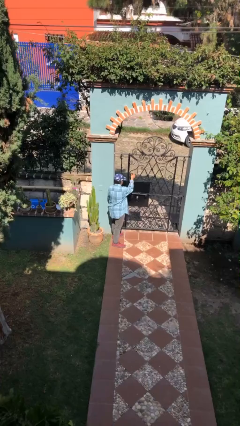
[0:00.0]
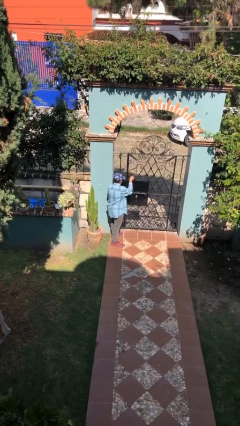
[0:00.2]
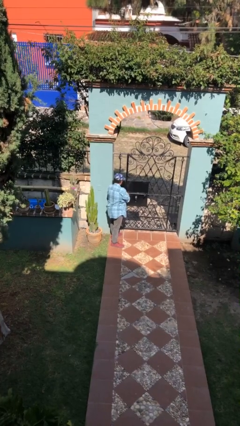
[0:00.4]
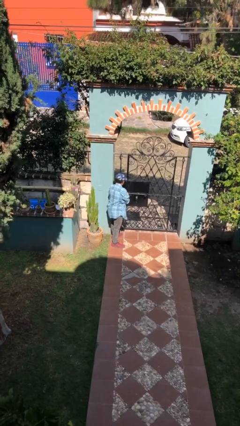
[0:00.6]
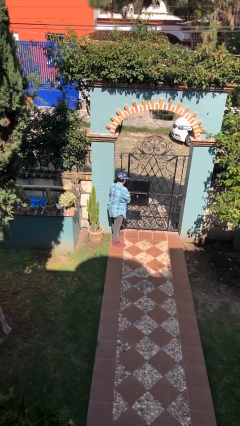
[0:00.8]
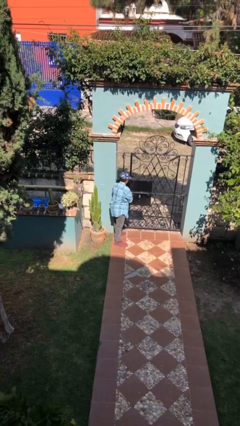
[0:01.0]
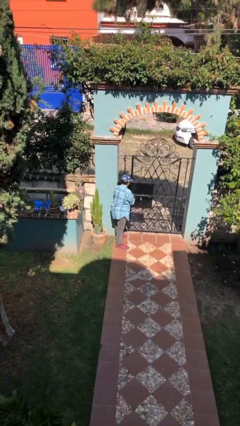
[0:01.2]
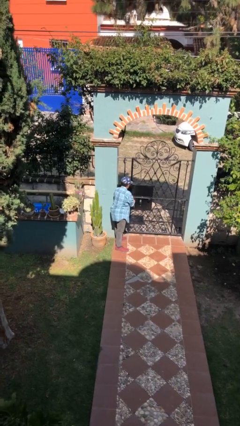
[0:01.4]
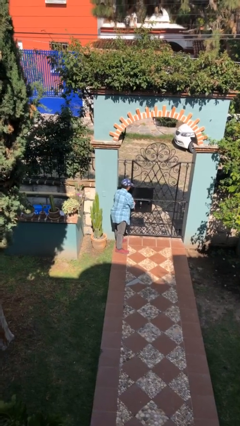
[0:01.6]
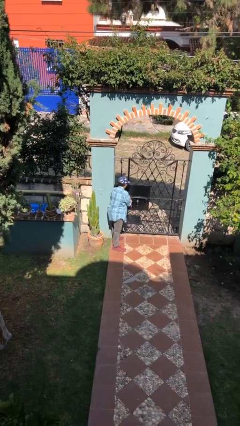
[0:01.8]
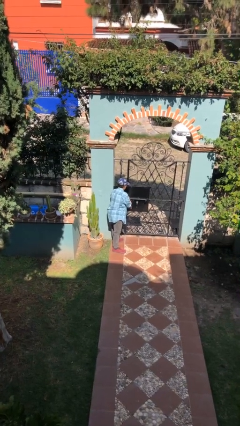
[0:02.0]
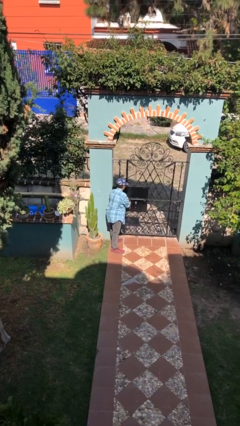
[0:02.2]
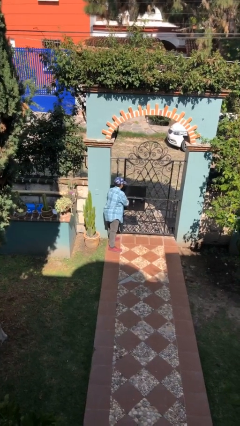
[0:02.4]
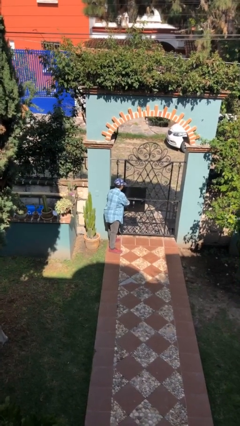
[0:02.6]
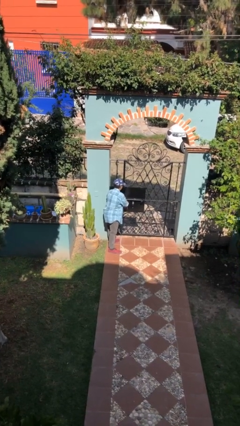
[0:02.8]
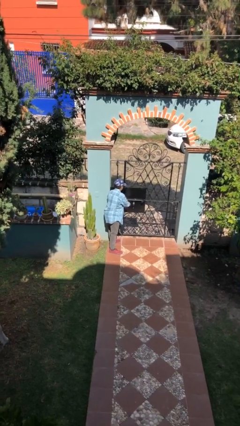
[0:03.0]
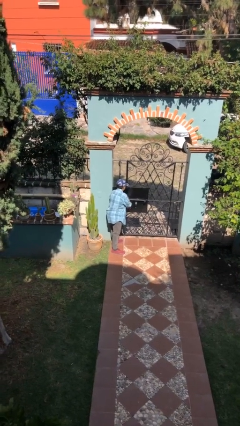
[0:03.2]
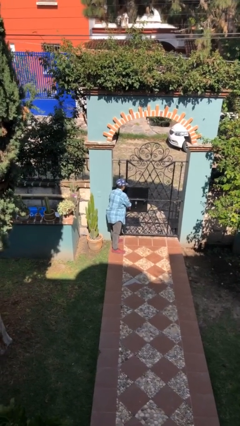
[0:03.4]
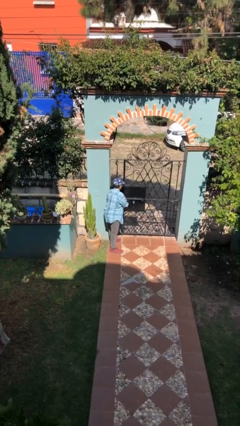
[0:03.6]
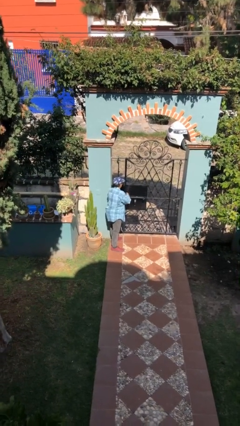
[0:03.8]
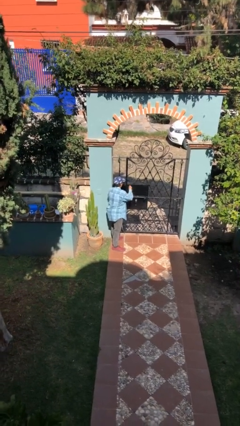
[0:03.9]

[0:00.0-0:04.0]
person locks door with keys

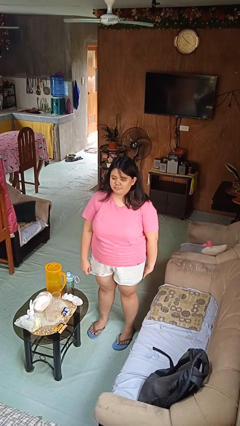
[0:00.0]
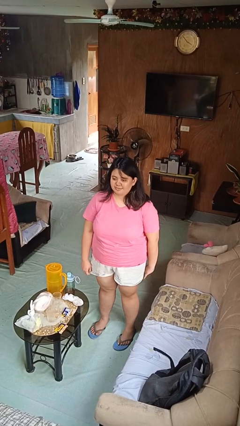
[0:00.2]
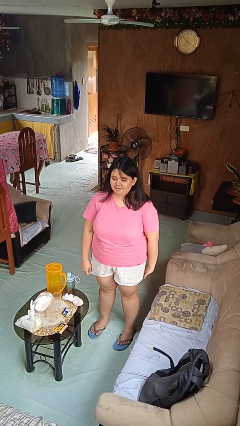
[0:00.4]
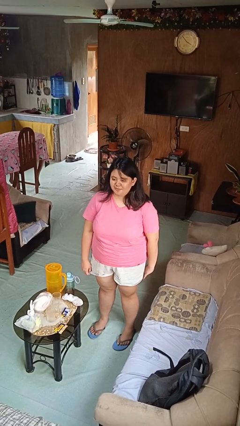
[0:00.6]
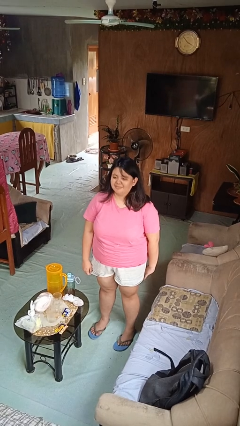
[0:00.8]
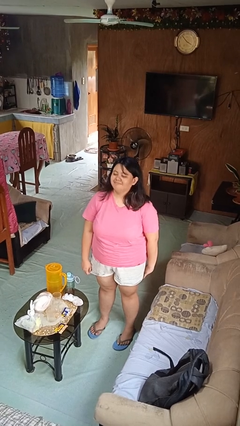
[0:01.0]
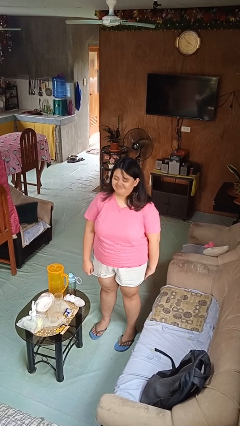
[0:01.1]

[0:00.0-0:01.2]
person nods head

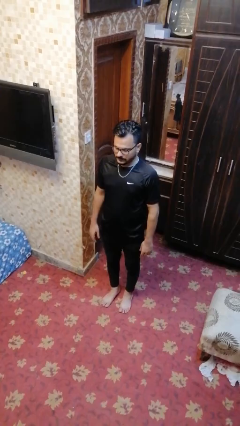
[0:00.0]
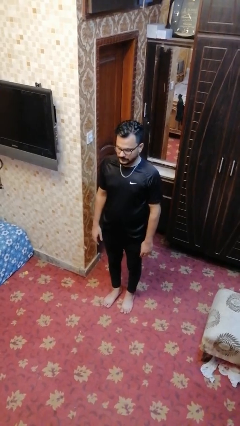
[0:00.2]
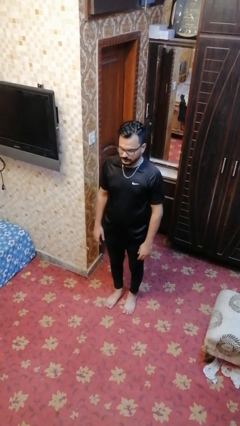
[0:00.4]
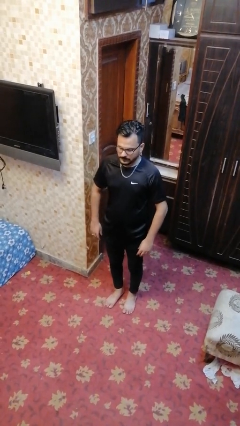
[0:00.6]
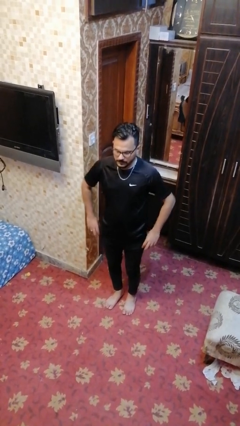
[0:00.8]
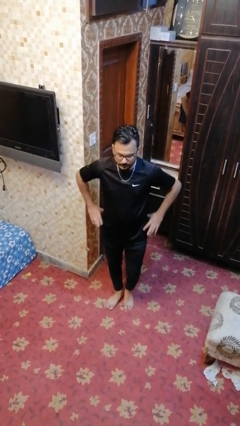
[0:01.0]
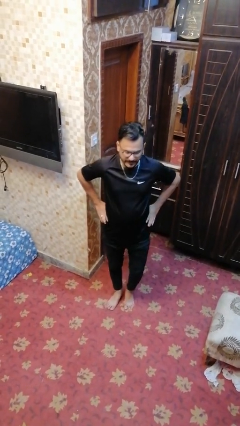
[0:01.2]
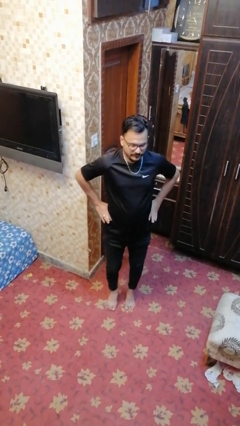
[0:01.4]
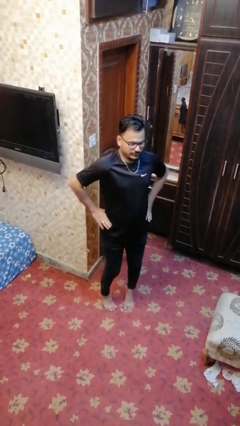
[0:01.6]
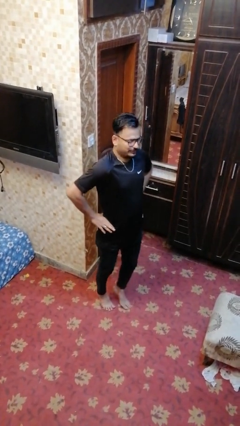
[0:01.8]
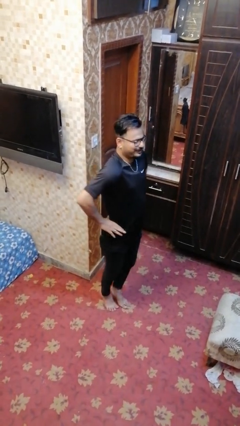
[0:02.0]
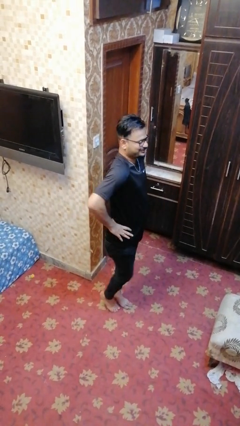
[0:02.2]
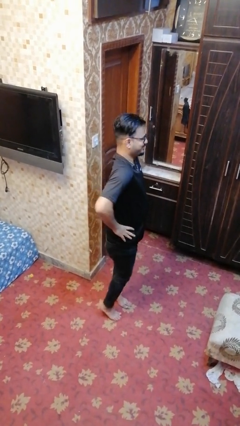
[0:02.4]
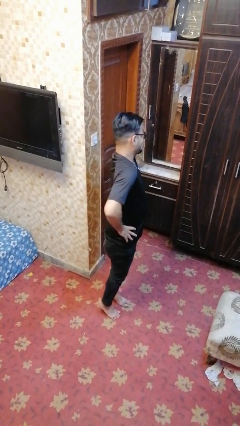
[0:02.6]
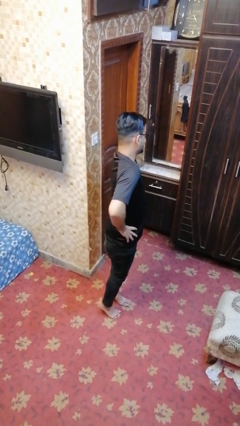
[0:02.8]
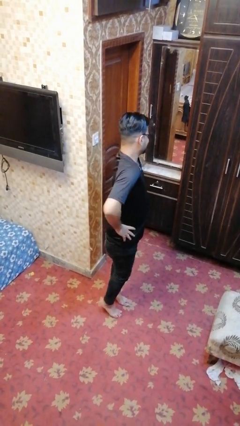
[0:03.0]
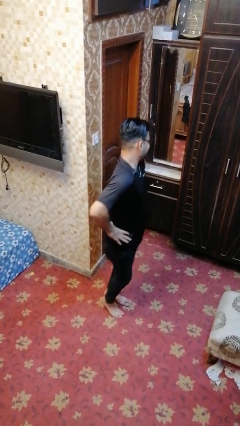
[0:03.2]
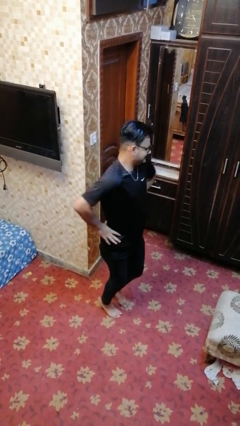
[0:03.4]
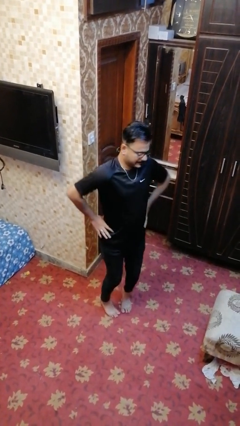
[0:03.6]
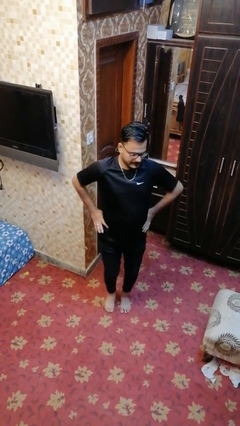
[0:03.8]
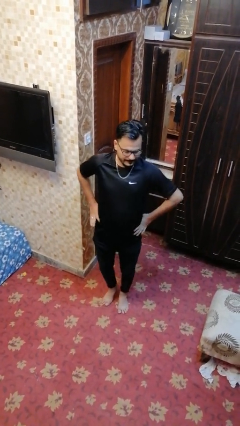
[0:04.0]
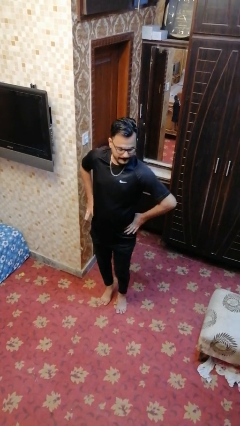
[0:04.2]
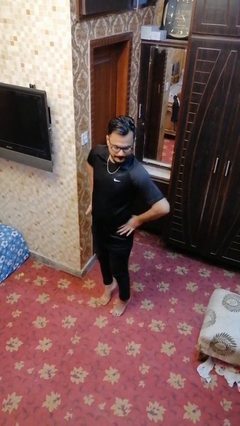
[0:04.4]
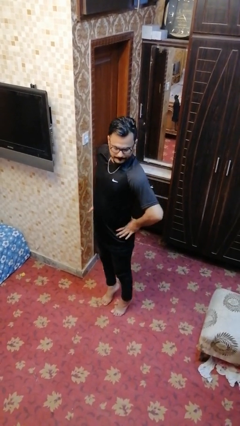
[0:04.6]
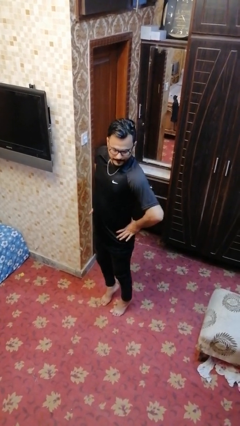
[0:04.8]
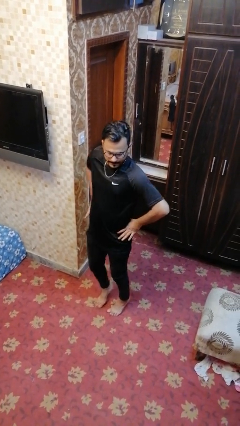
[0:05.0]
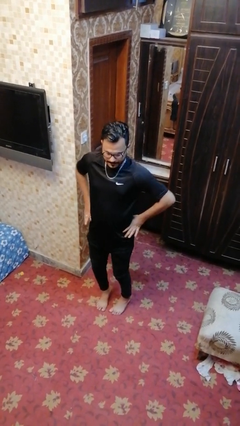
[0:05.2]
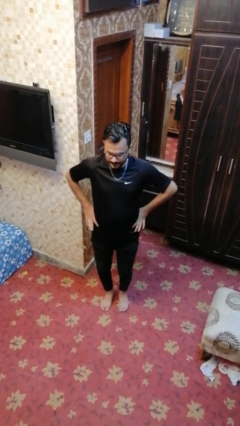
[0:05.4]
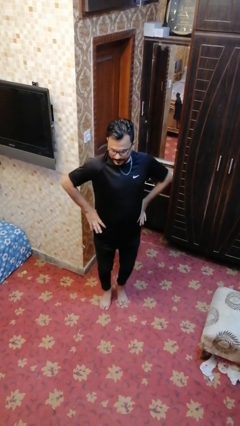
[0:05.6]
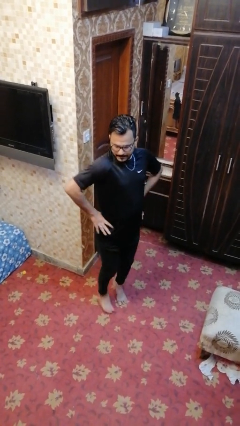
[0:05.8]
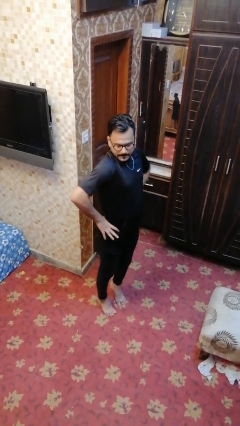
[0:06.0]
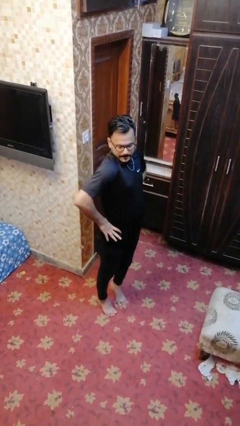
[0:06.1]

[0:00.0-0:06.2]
person walks tiptoe

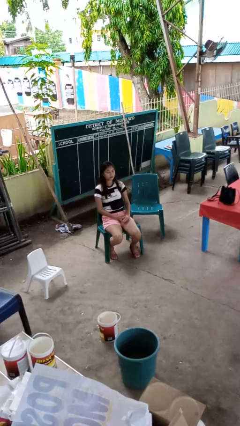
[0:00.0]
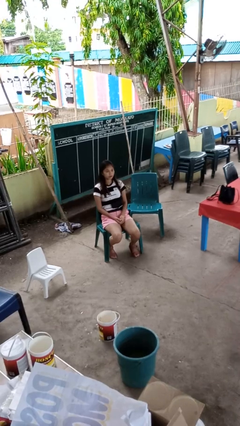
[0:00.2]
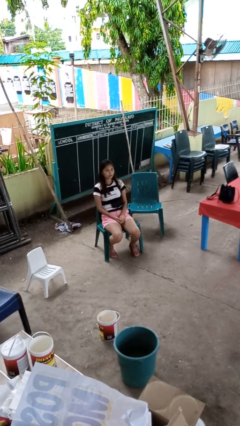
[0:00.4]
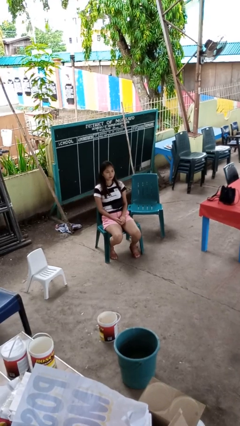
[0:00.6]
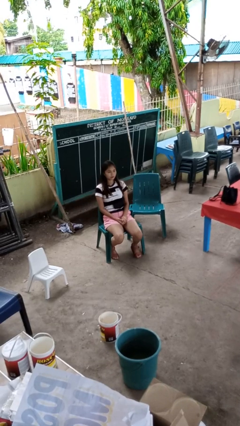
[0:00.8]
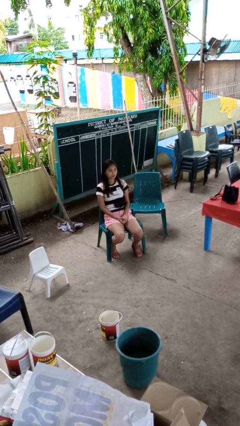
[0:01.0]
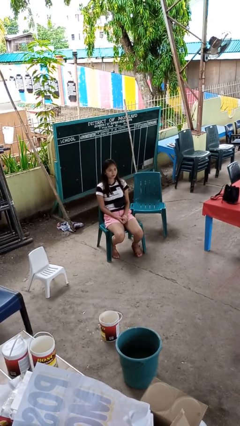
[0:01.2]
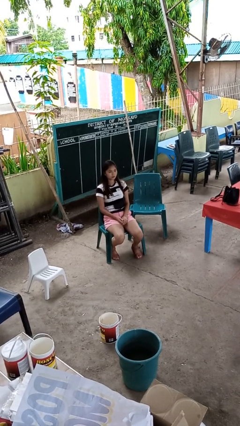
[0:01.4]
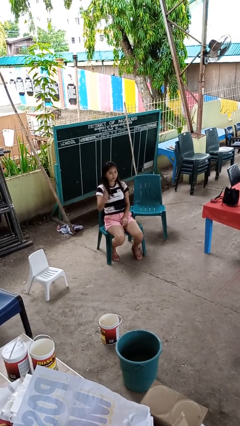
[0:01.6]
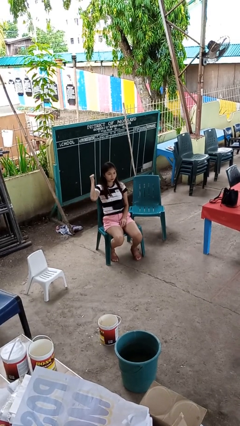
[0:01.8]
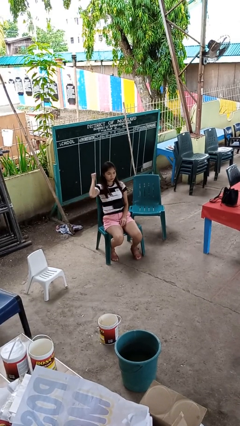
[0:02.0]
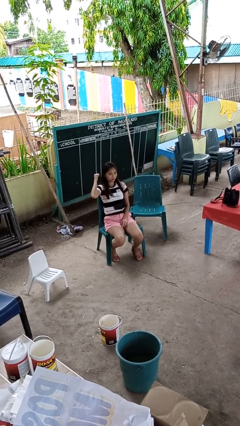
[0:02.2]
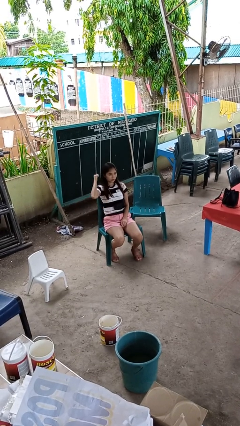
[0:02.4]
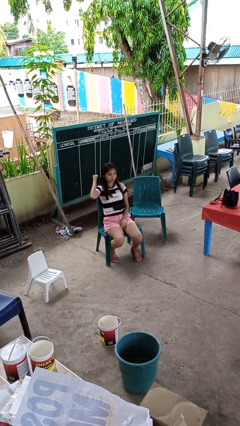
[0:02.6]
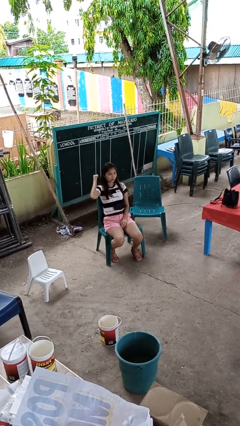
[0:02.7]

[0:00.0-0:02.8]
person gestures behind me

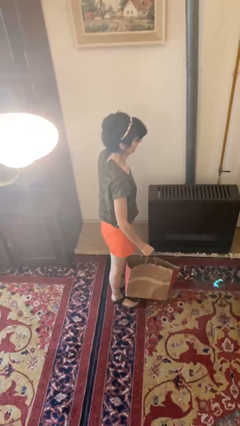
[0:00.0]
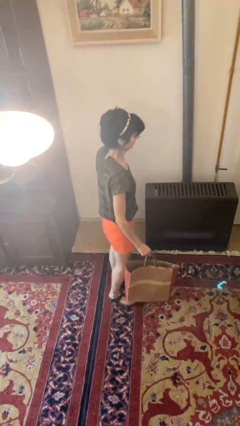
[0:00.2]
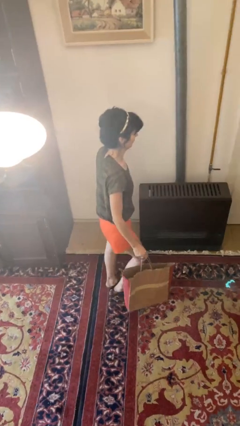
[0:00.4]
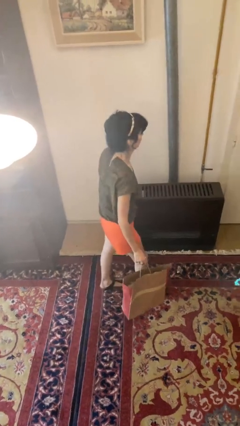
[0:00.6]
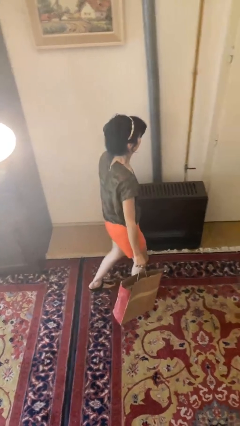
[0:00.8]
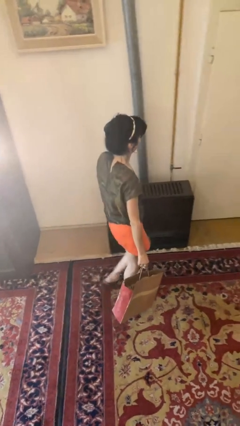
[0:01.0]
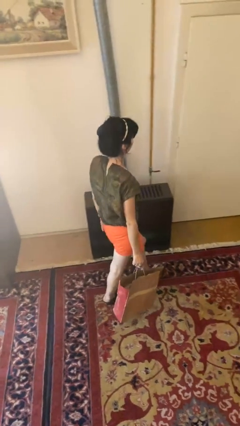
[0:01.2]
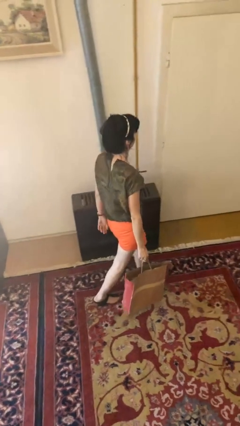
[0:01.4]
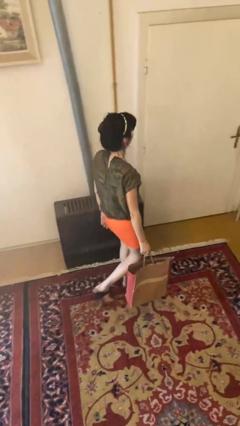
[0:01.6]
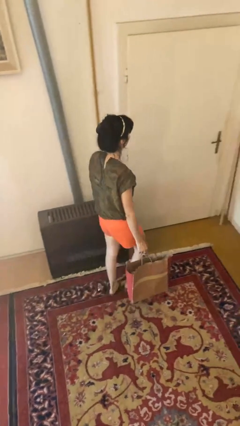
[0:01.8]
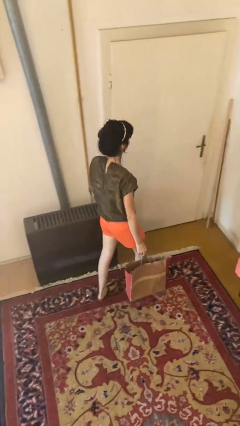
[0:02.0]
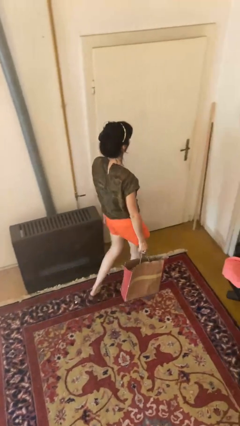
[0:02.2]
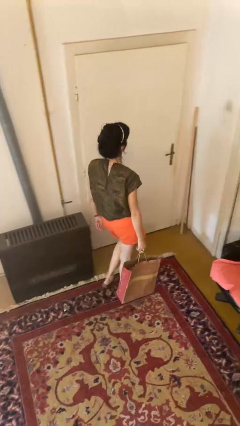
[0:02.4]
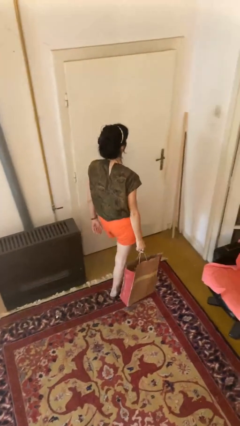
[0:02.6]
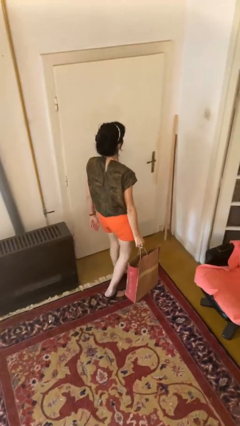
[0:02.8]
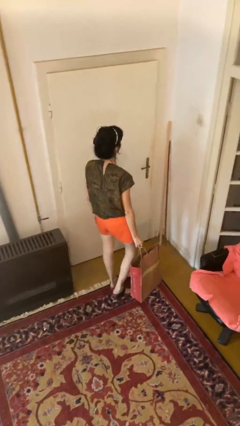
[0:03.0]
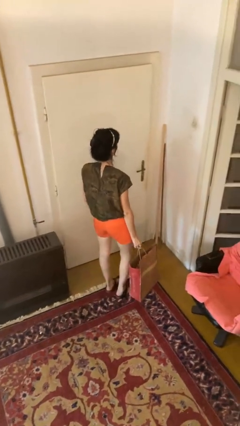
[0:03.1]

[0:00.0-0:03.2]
person carries groceries

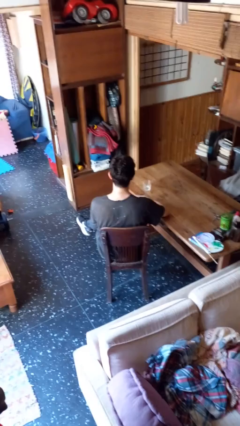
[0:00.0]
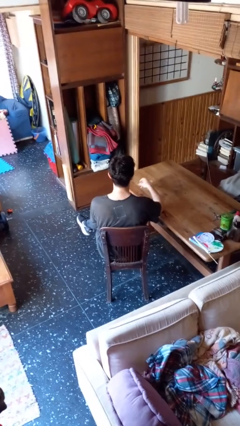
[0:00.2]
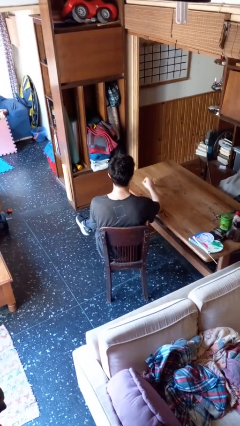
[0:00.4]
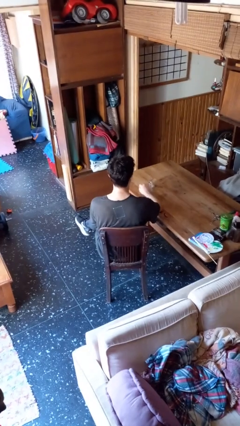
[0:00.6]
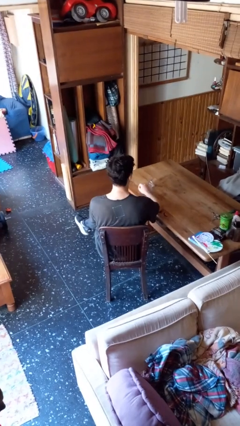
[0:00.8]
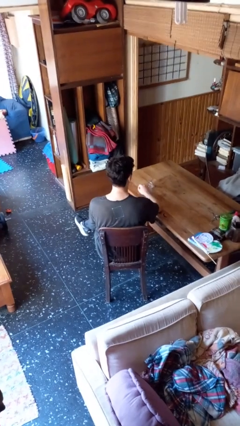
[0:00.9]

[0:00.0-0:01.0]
person knocks over glass
